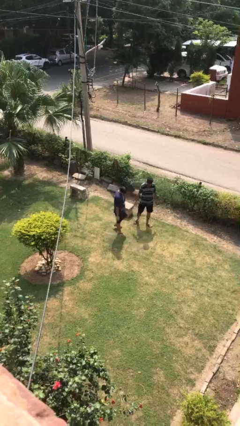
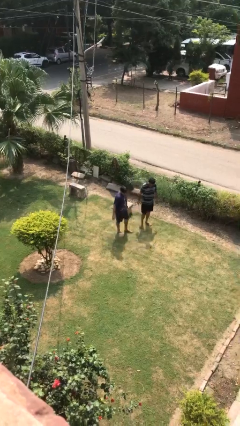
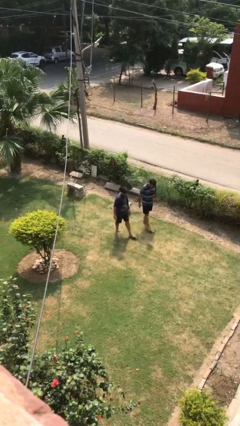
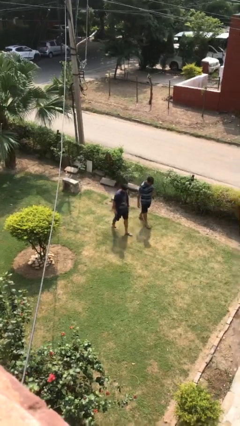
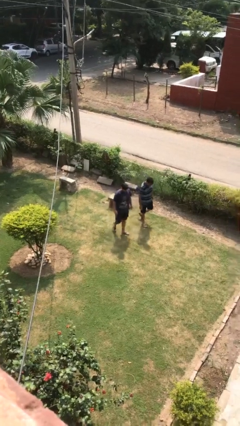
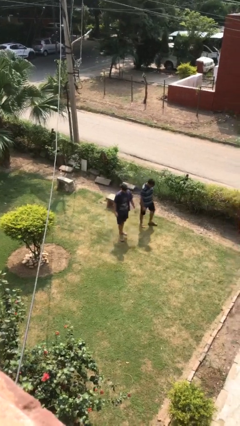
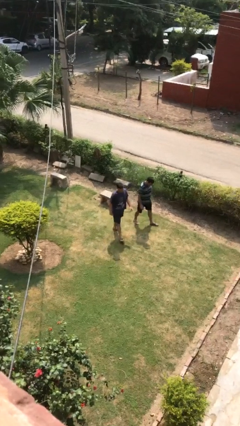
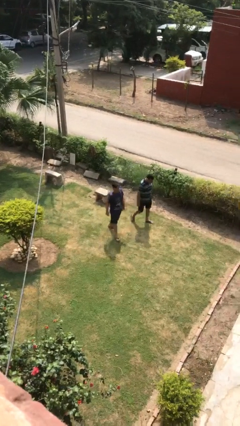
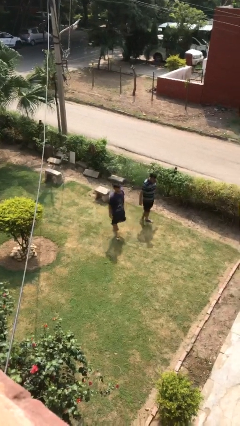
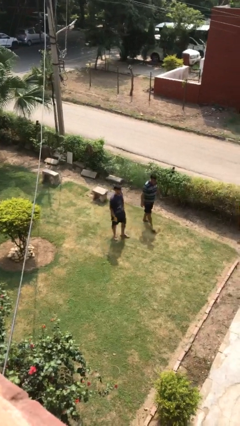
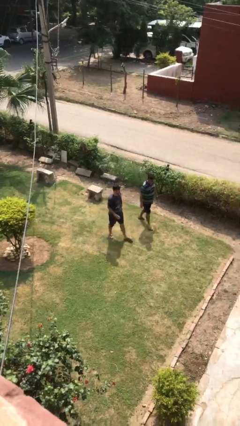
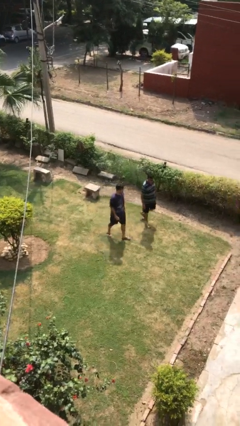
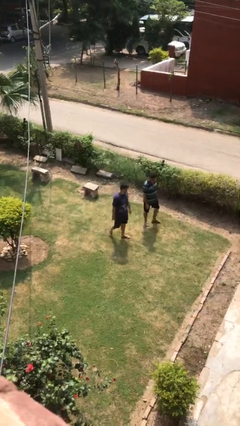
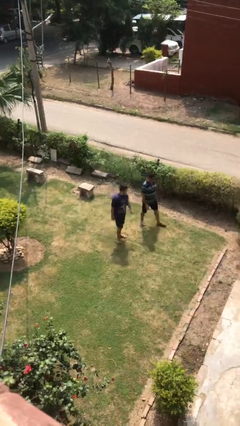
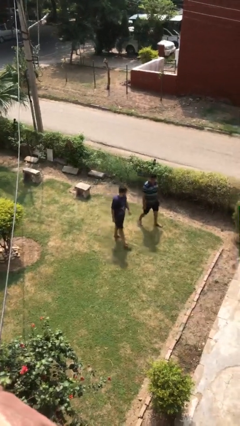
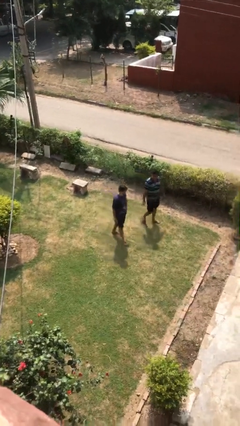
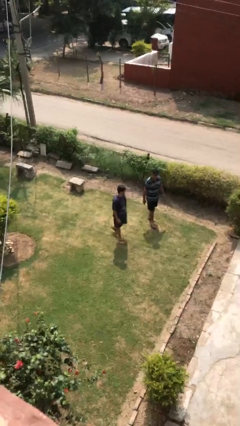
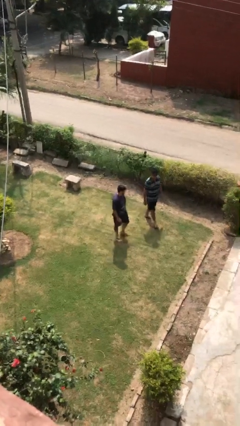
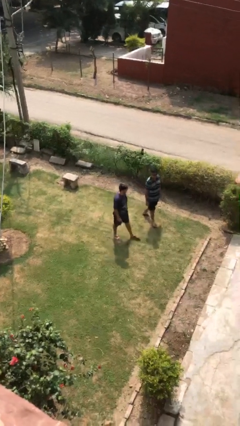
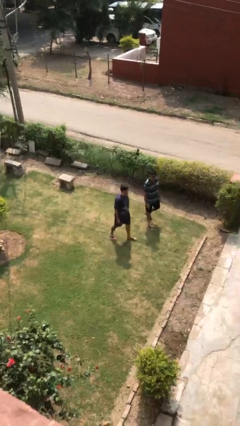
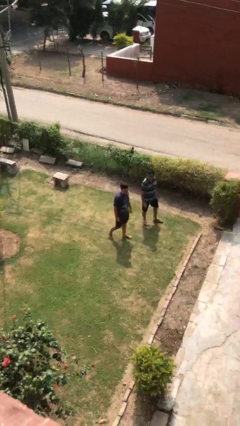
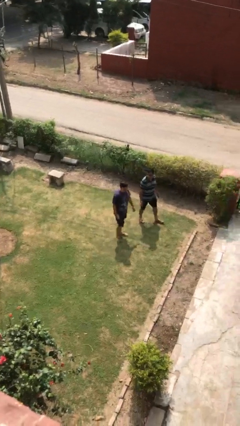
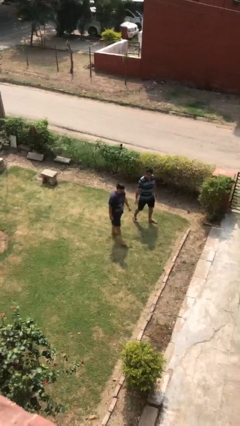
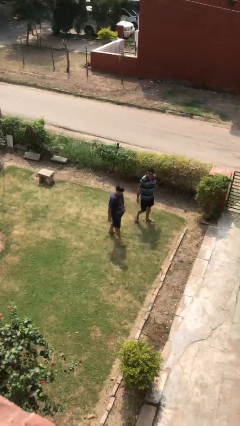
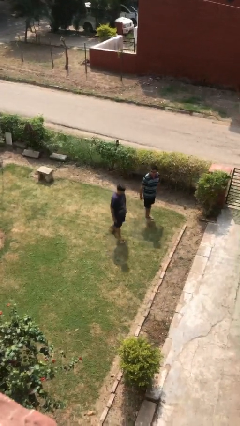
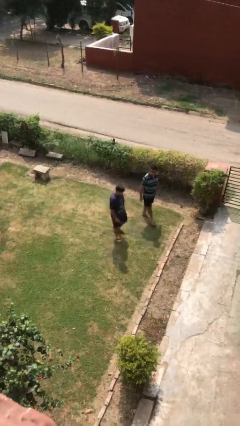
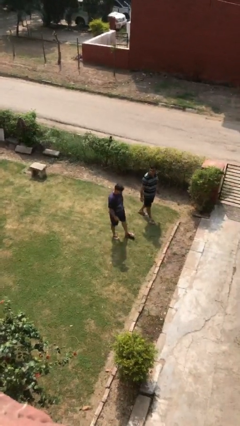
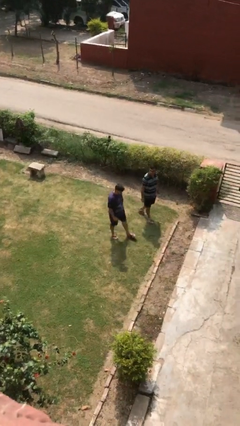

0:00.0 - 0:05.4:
person talks to person

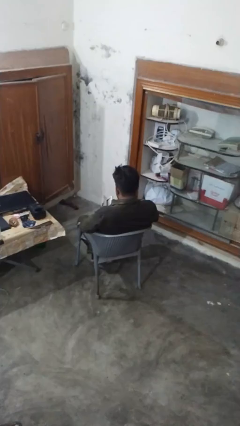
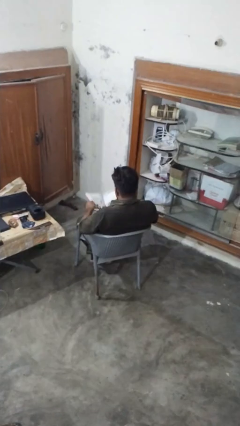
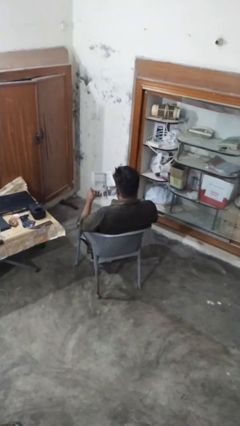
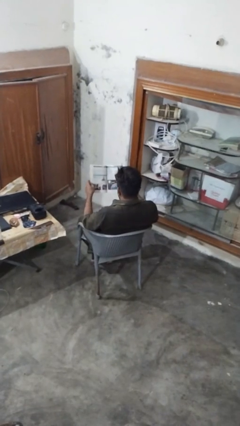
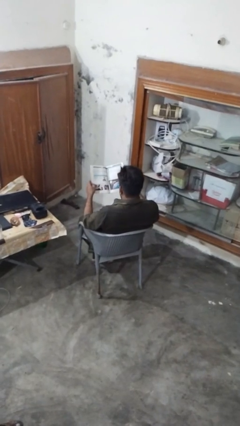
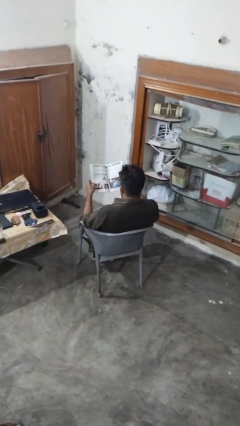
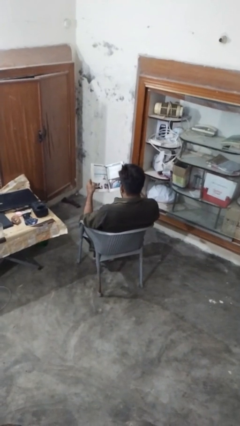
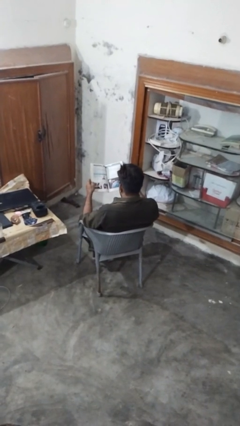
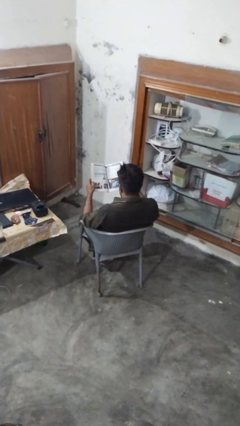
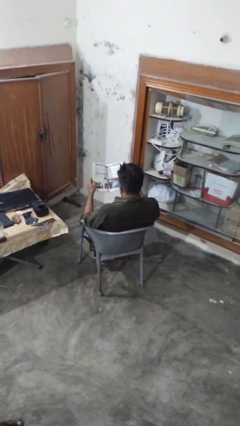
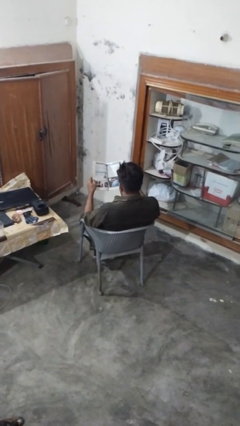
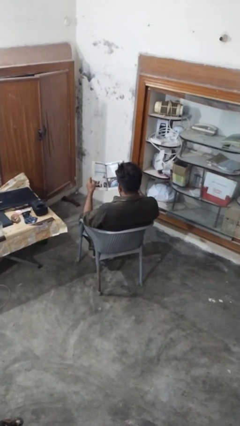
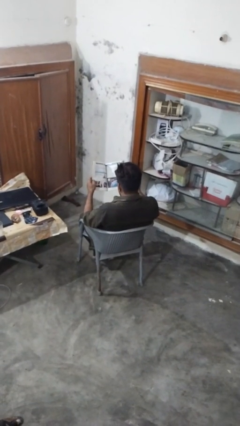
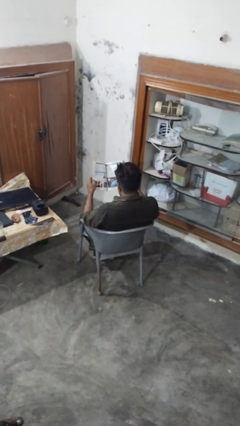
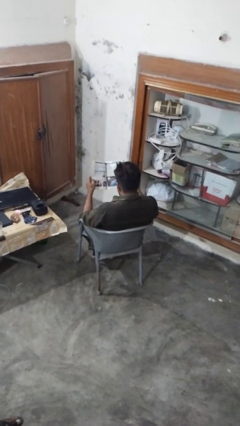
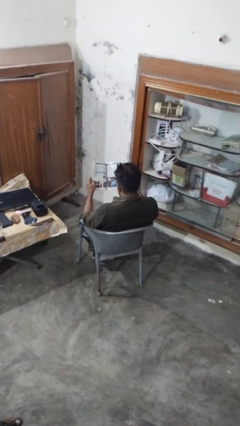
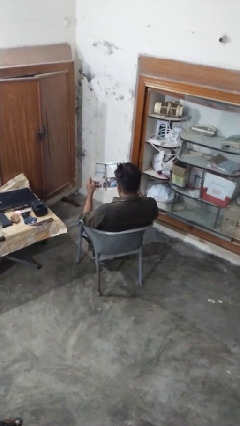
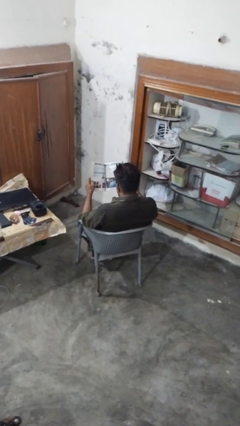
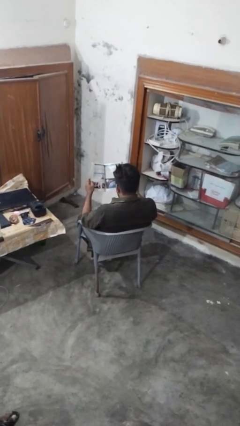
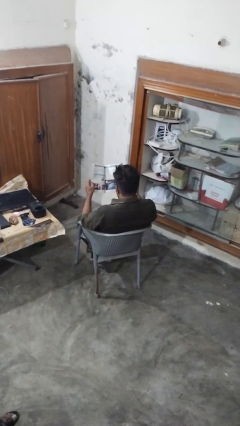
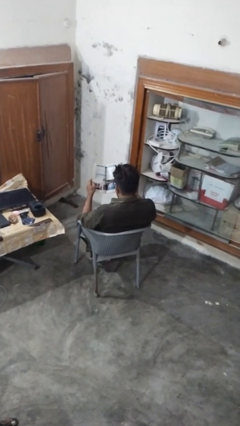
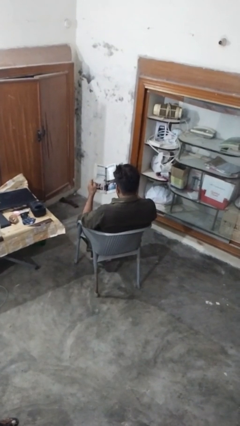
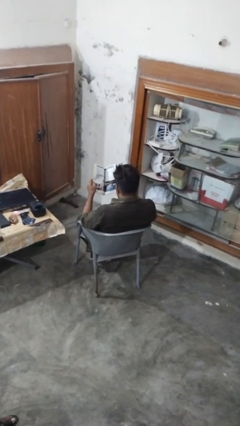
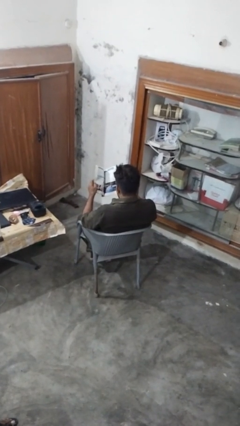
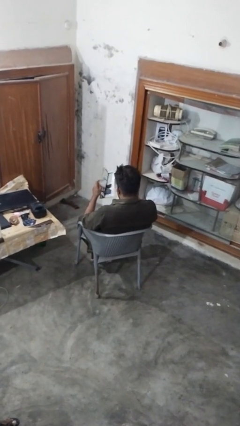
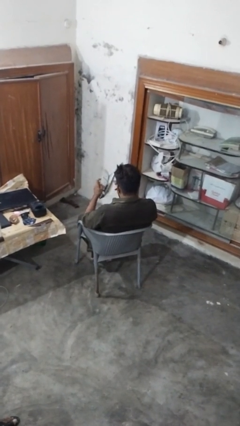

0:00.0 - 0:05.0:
person reads book

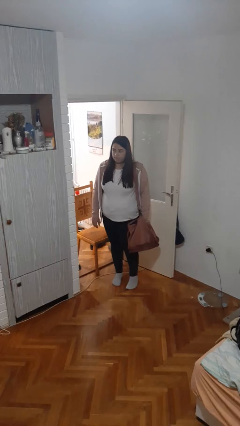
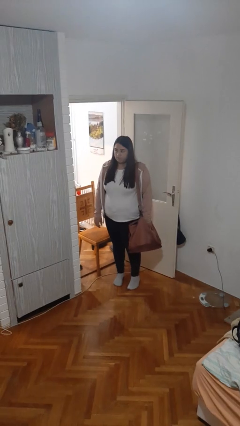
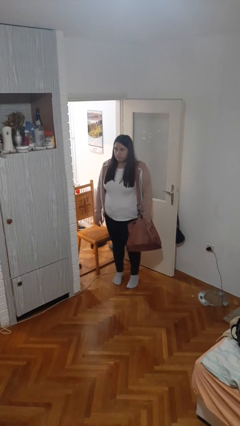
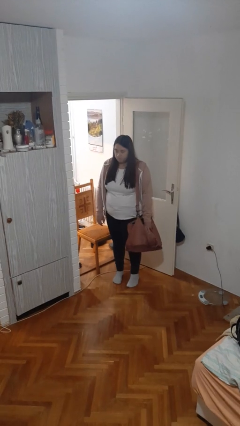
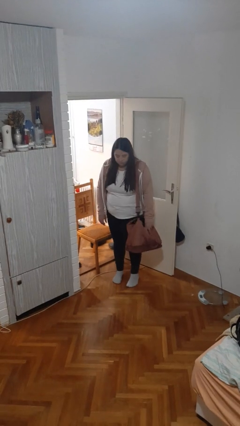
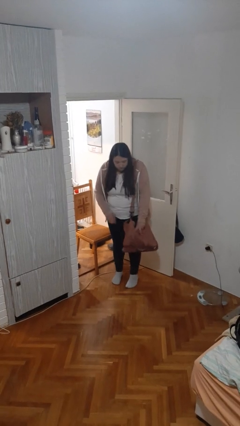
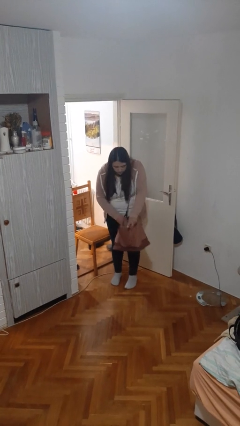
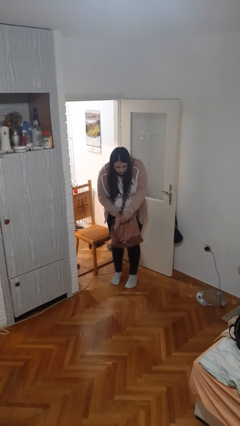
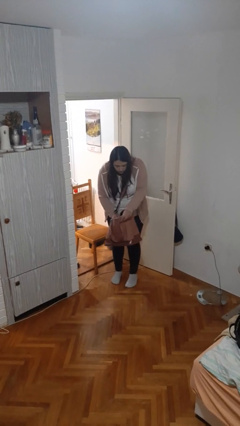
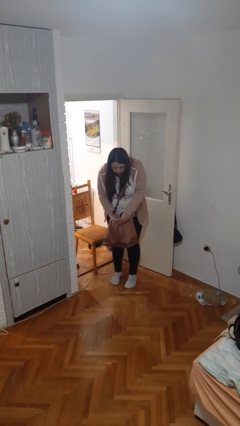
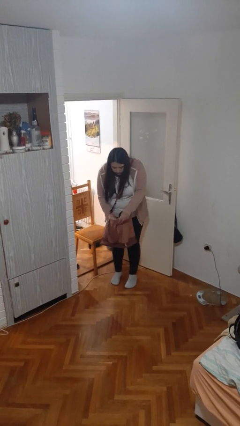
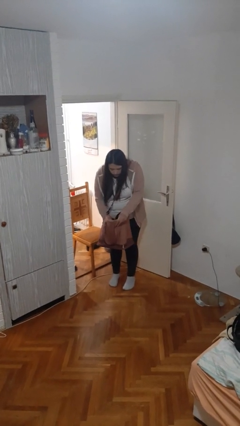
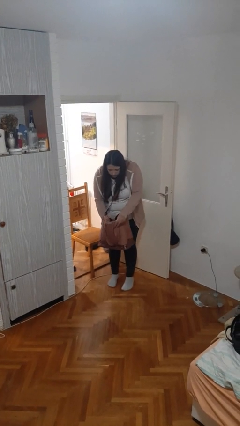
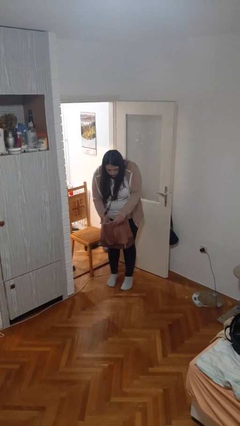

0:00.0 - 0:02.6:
person searches in purse

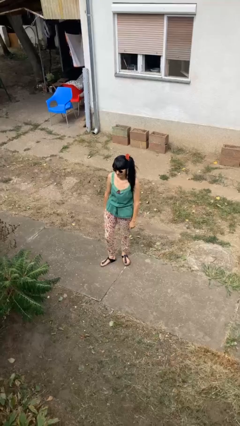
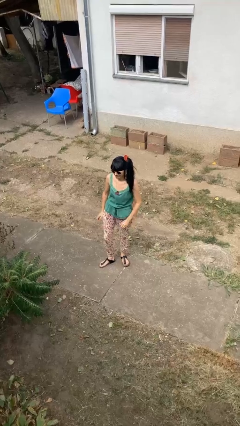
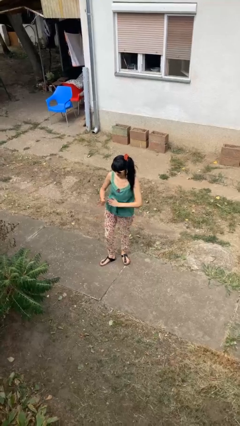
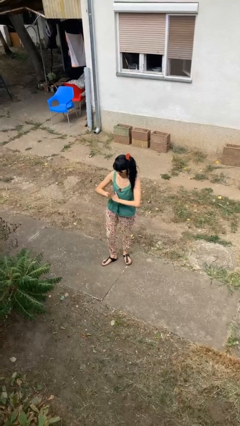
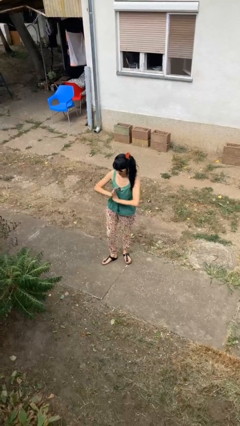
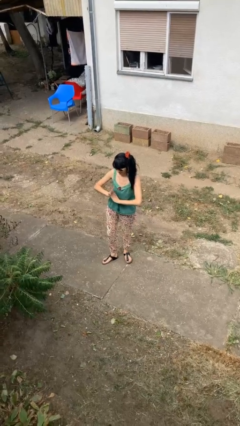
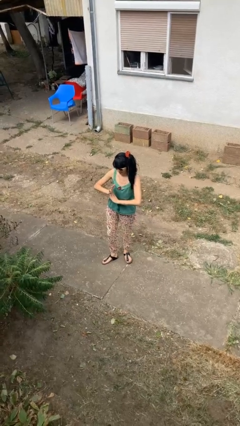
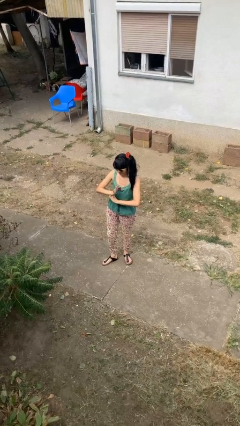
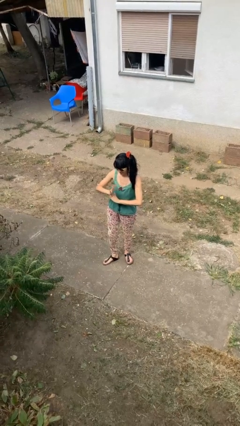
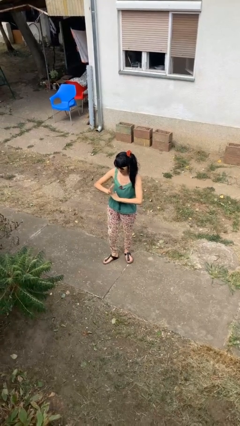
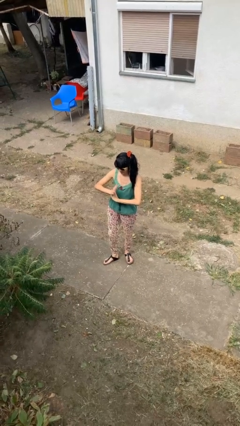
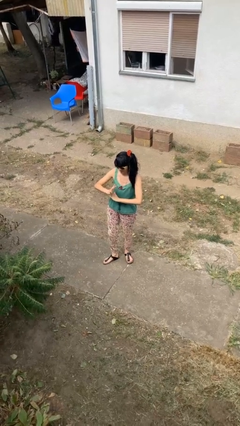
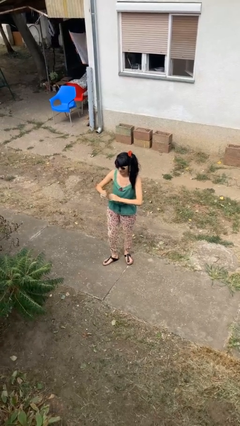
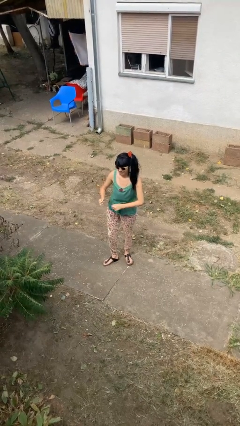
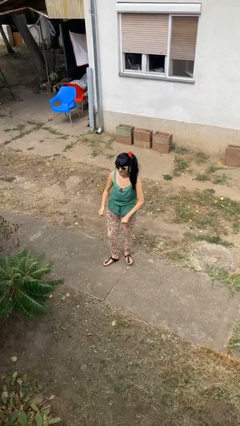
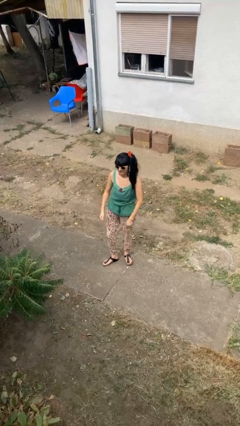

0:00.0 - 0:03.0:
person cracks knuckles

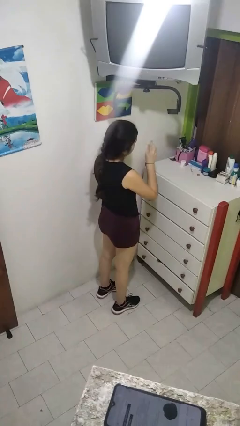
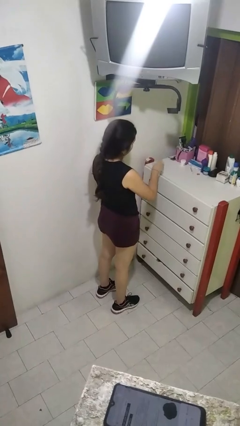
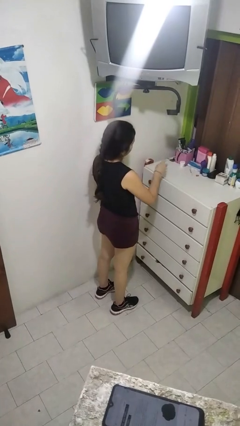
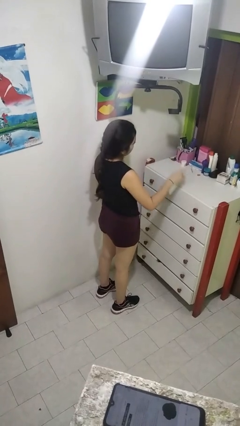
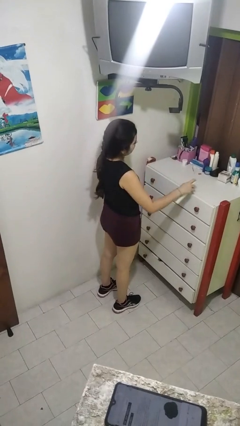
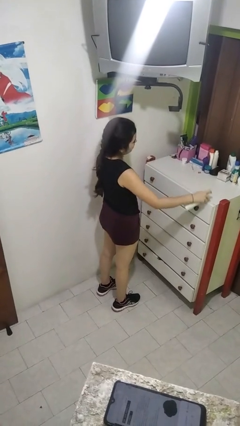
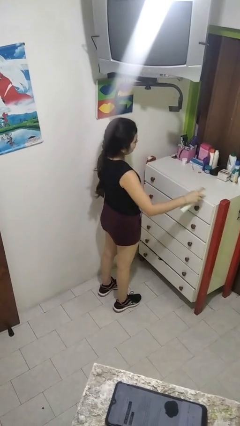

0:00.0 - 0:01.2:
person sprays from bottle

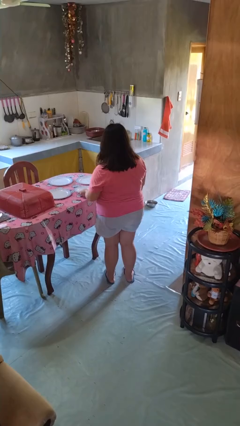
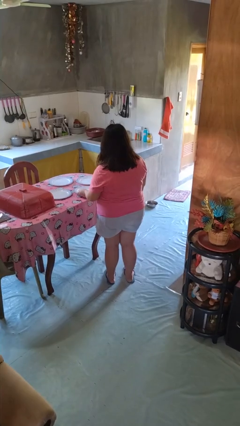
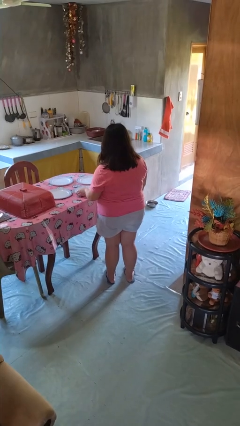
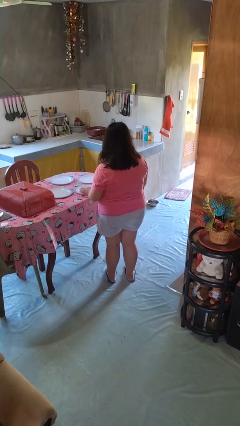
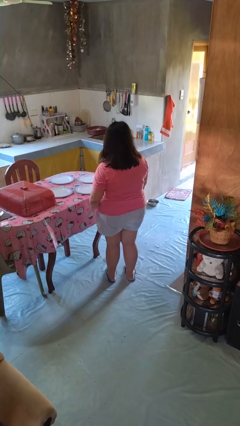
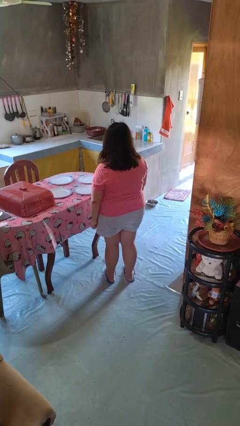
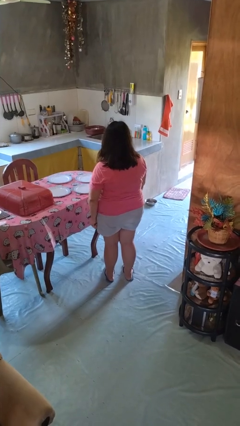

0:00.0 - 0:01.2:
person sets table
